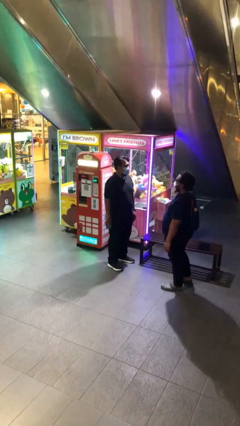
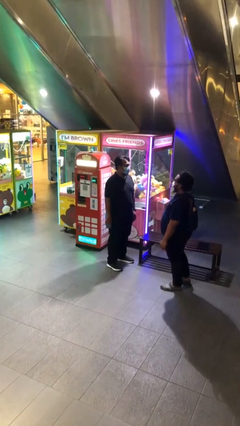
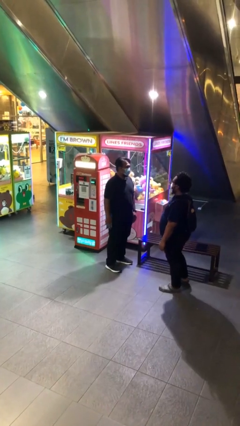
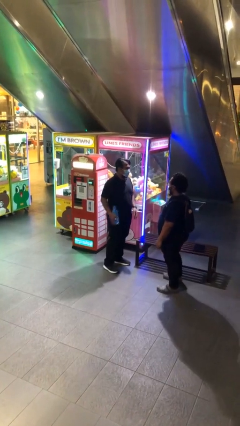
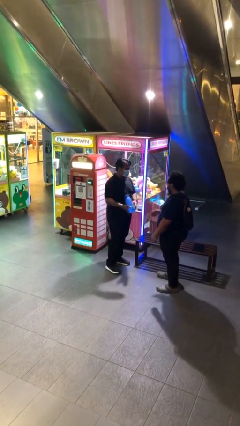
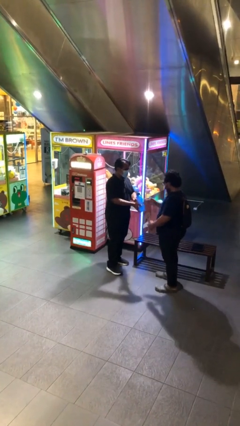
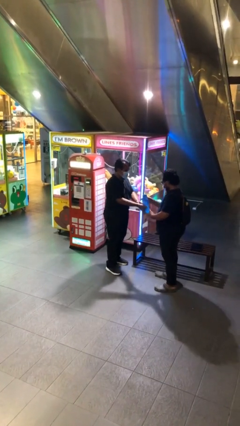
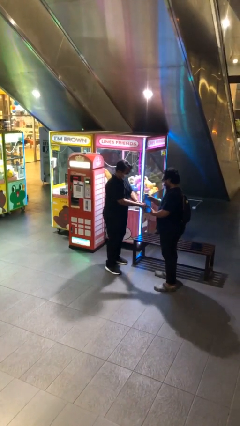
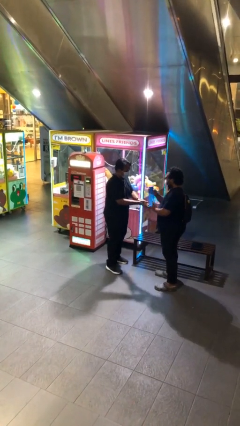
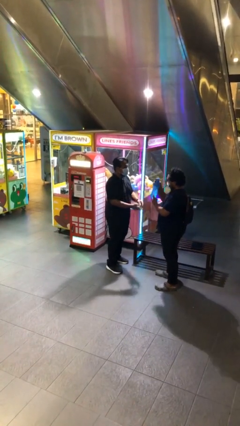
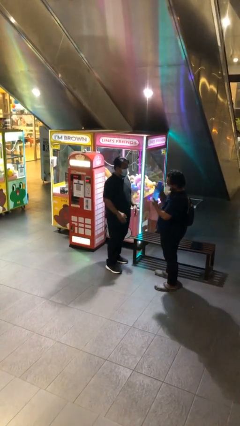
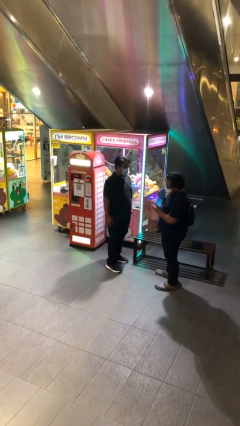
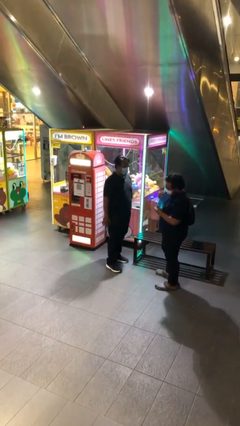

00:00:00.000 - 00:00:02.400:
person transfers object to person

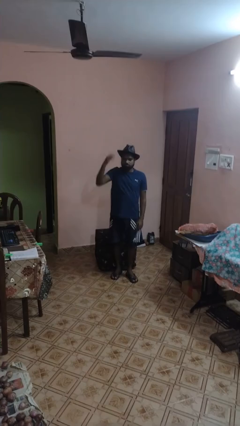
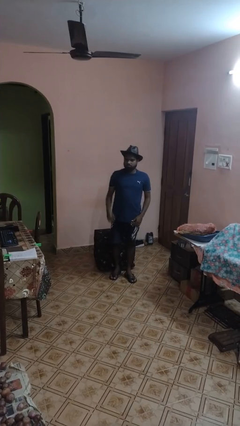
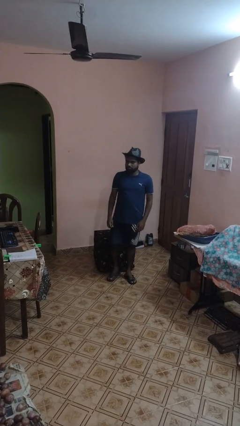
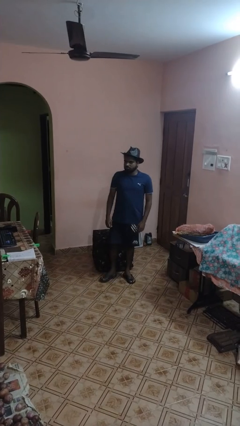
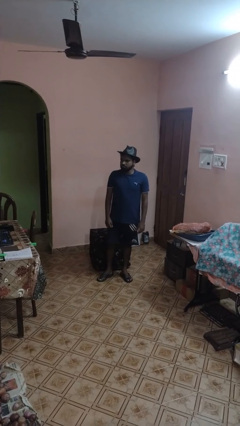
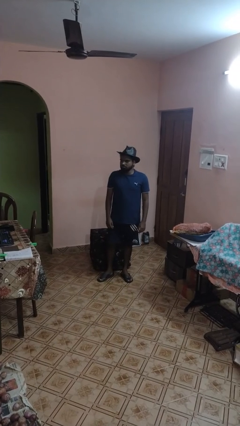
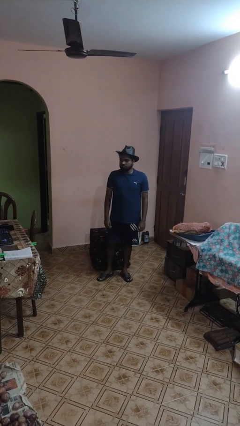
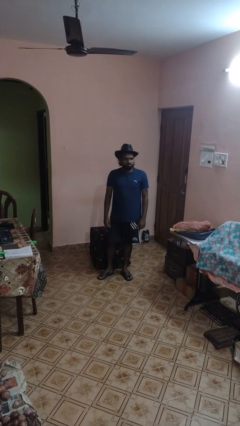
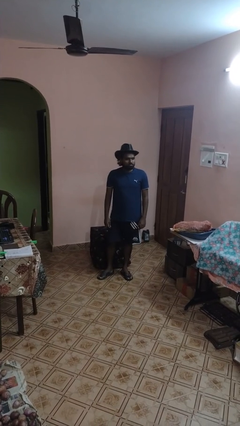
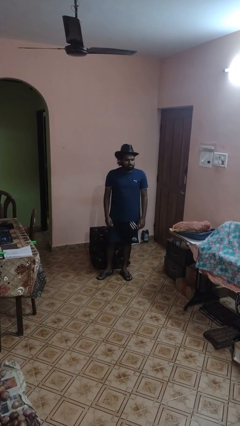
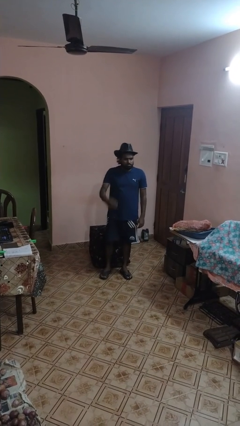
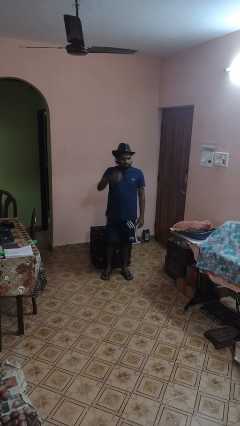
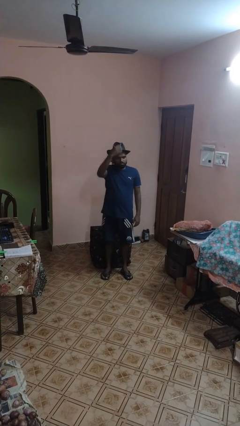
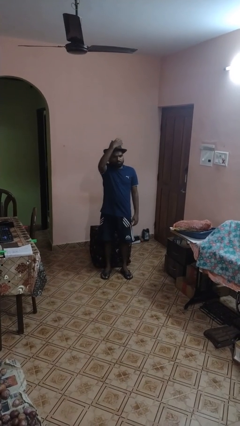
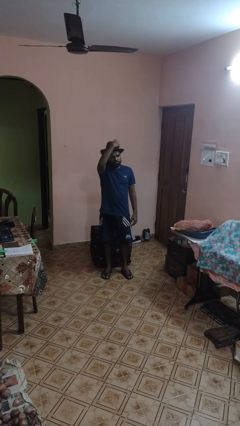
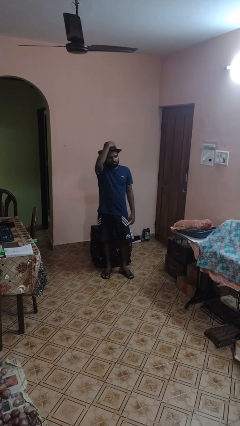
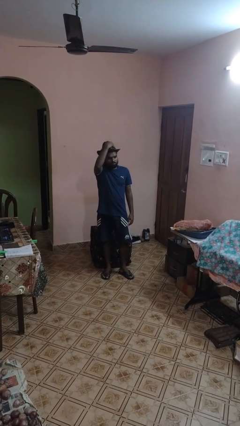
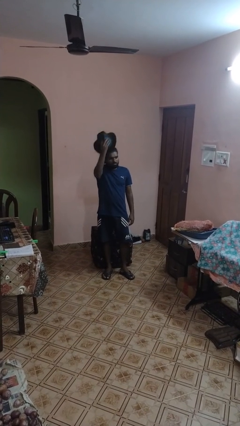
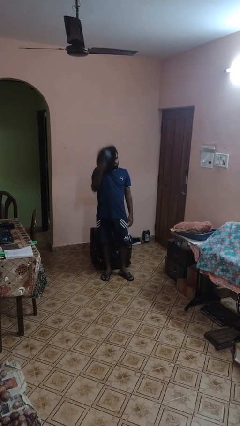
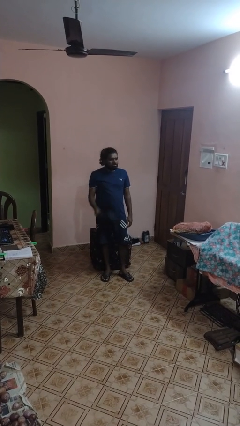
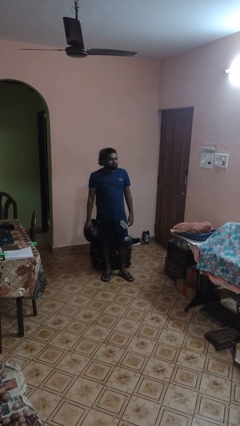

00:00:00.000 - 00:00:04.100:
person puts on hat

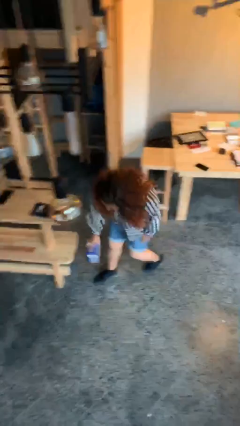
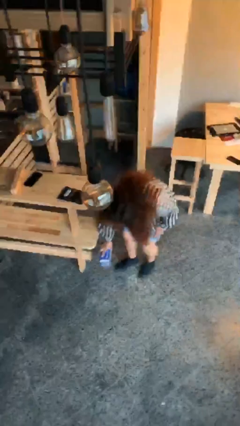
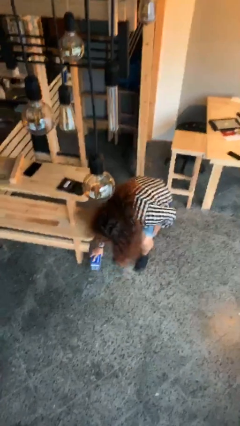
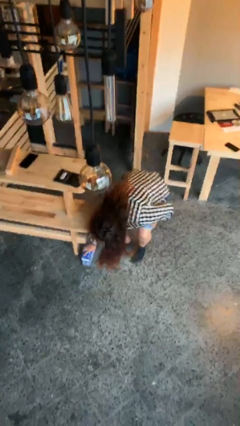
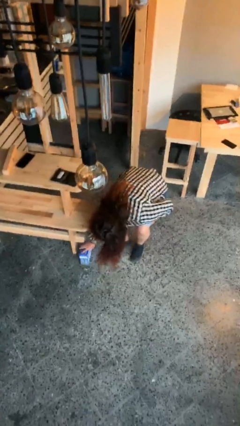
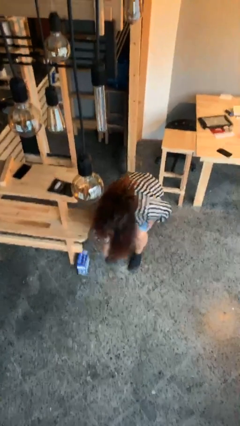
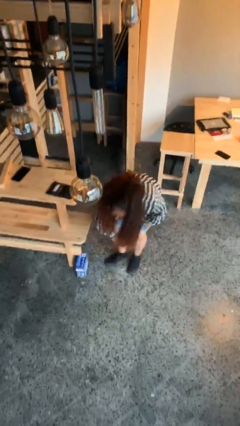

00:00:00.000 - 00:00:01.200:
person puts down object on floor

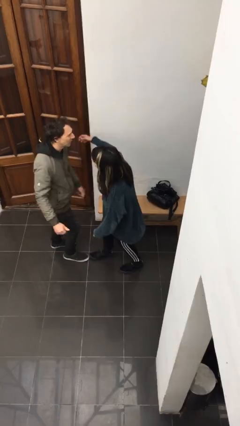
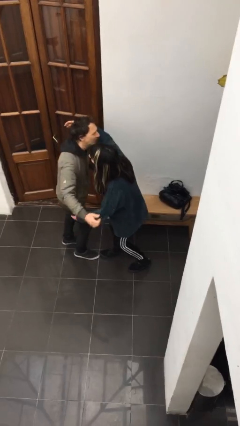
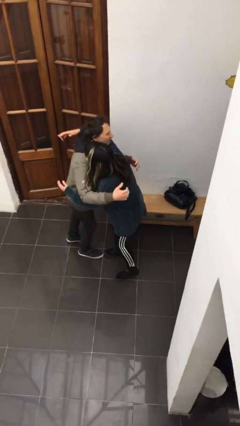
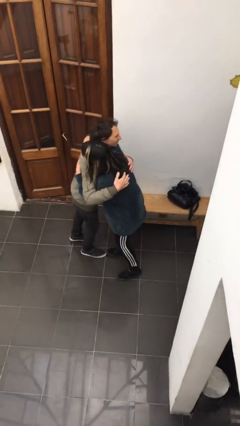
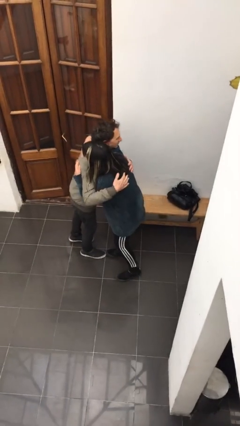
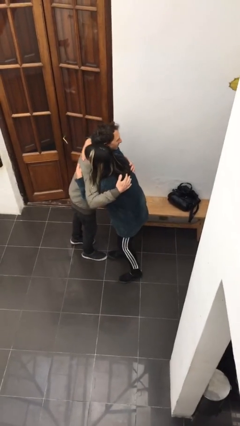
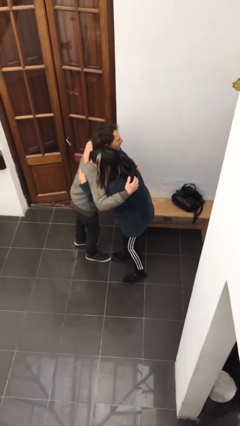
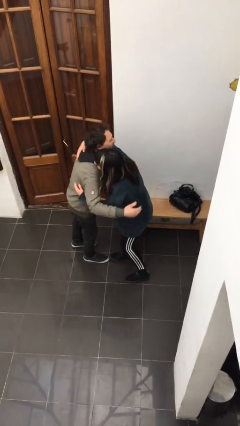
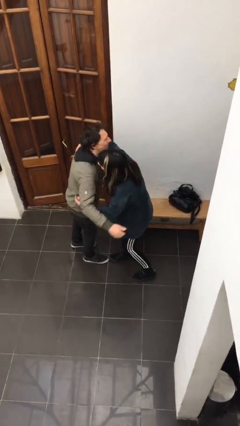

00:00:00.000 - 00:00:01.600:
person embraces person

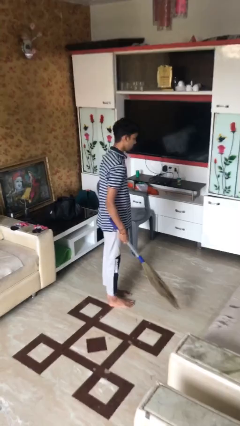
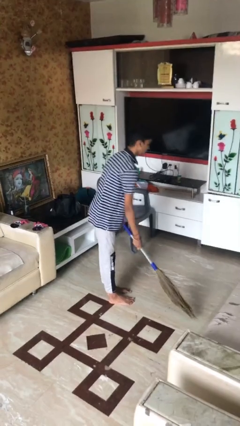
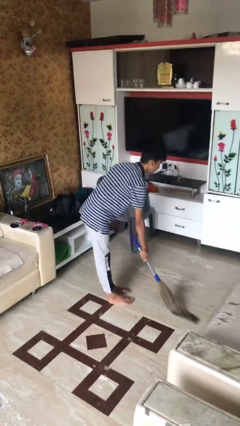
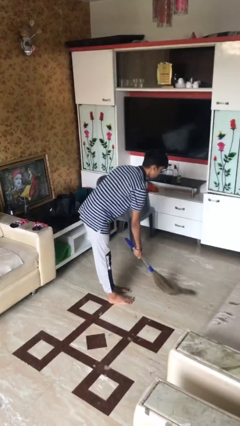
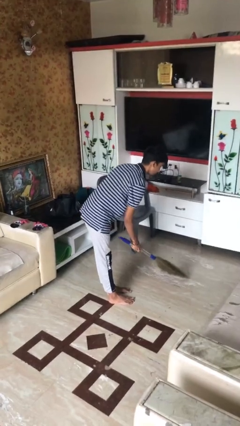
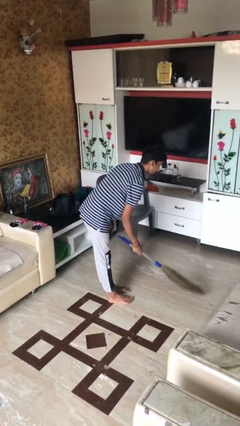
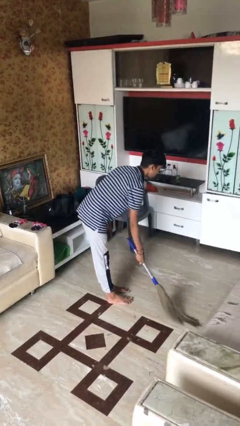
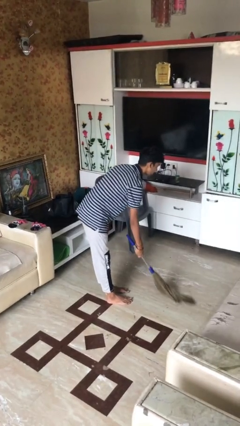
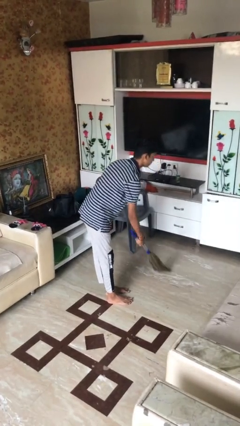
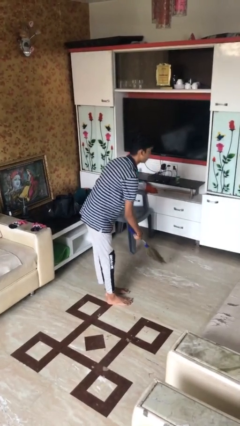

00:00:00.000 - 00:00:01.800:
person sweeps floor

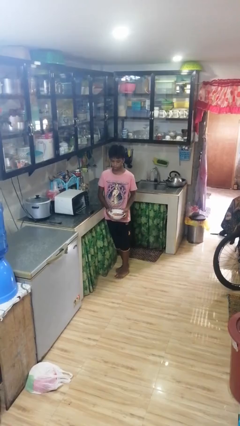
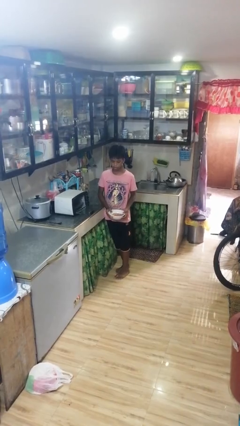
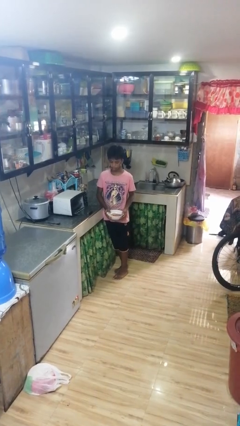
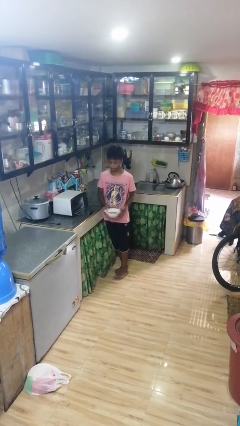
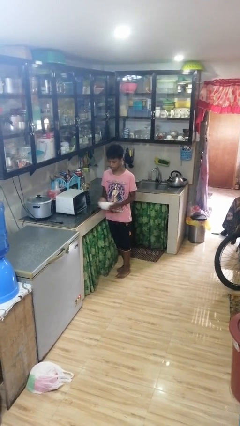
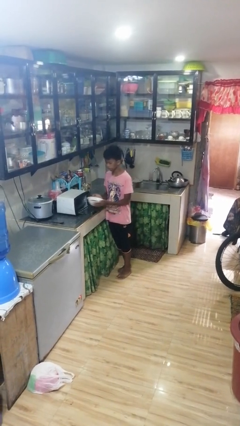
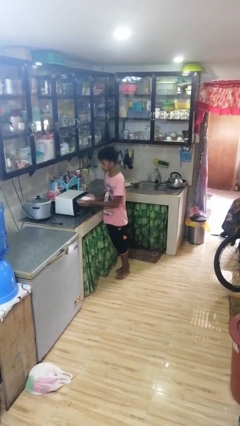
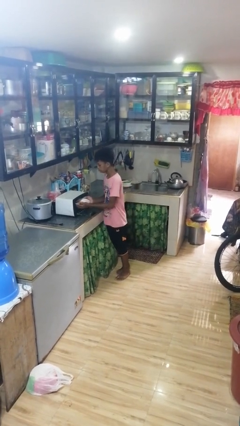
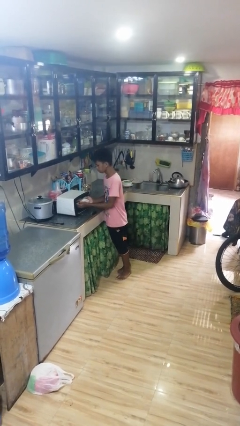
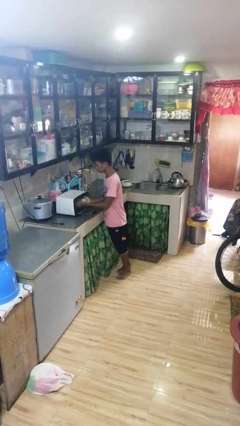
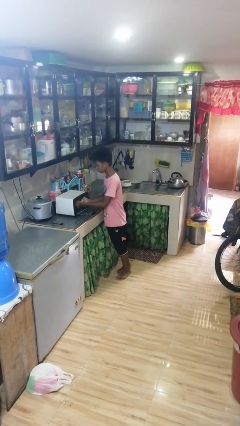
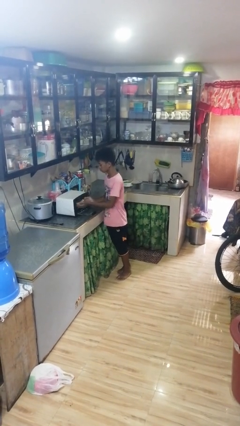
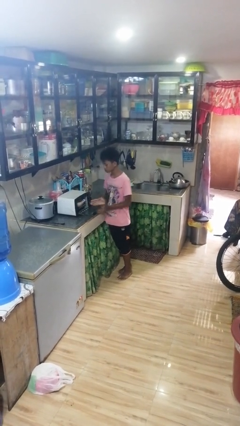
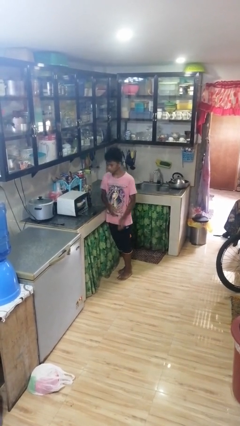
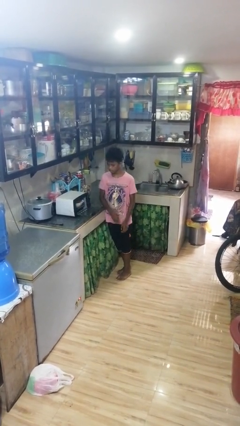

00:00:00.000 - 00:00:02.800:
person puts object into microwave

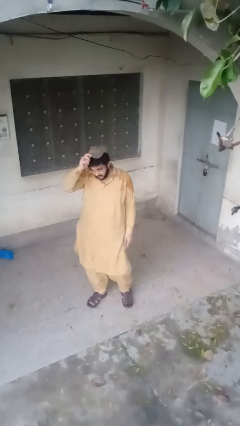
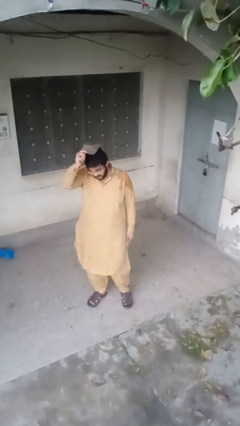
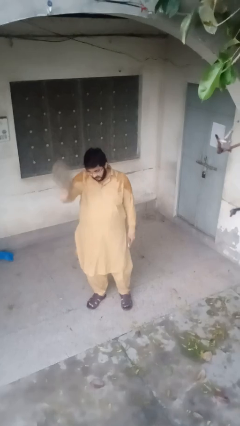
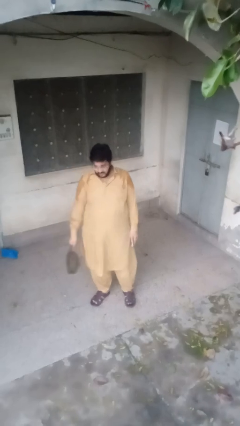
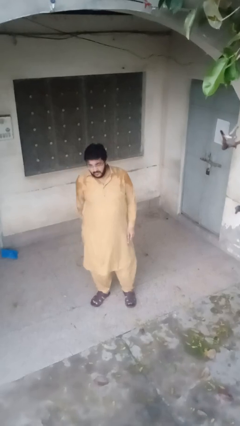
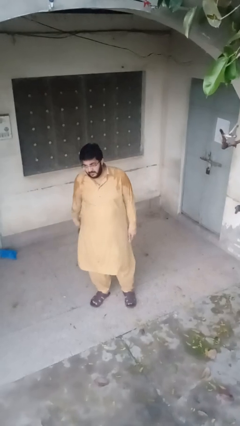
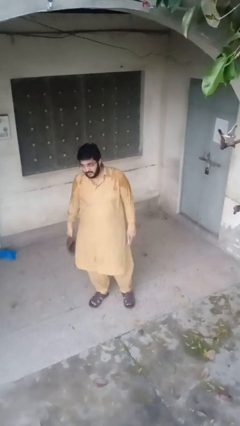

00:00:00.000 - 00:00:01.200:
person takes off hat

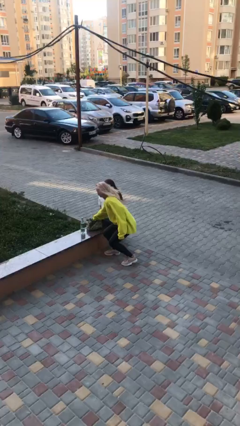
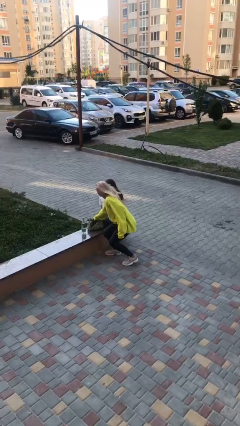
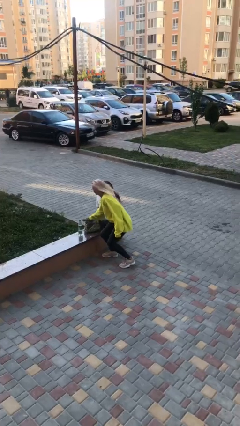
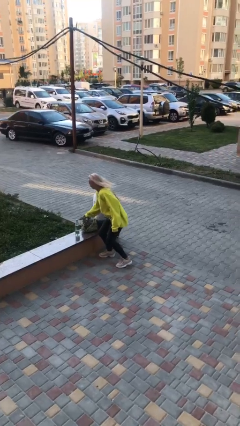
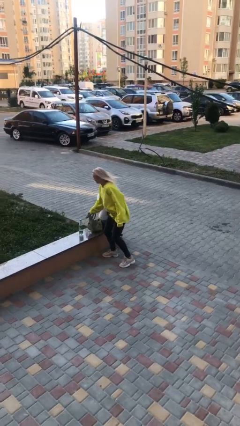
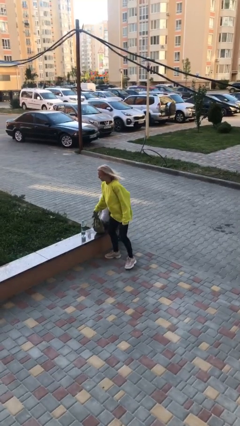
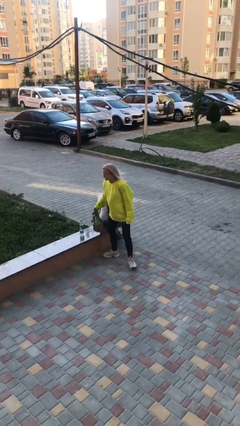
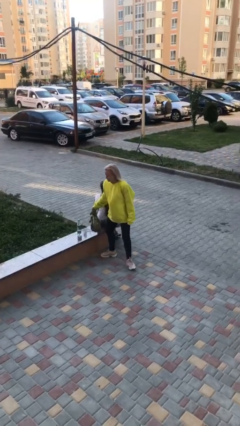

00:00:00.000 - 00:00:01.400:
person steals object from person

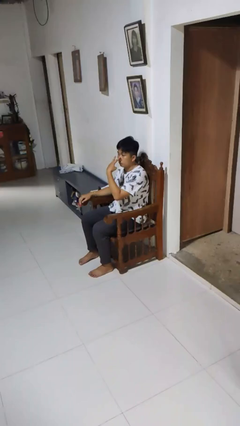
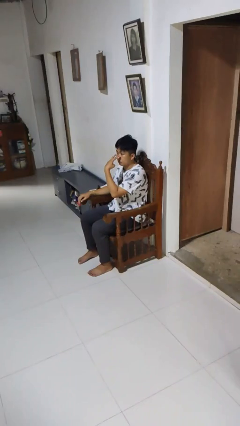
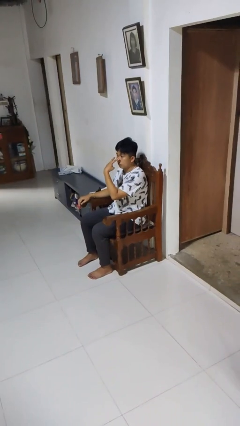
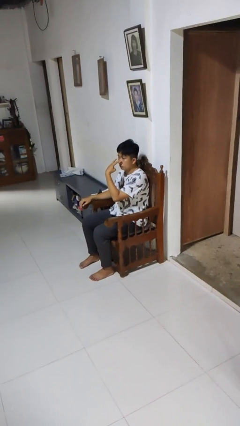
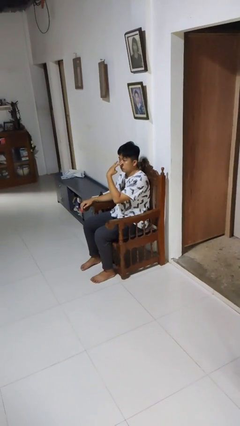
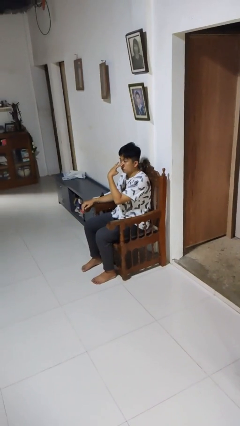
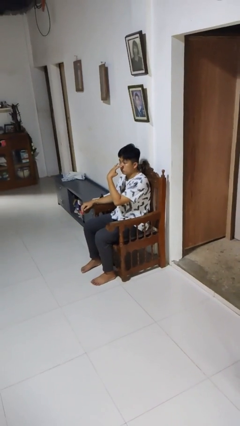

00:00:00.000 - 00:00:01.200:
person gestures watch closely
